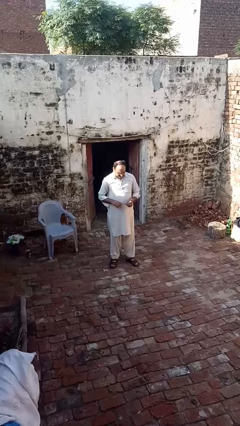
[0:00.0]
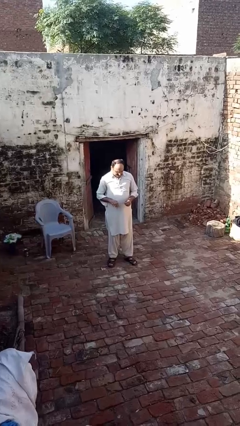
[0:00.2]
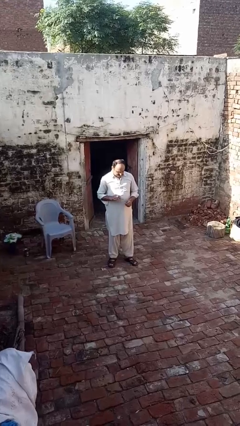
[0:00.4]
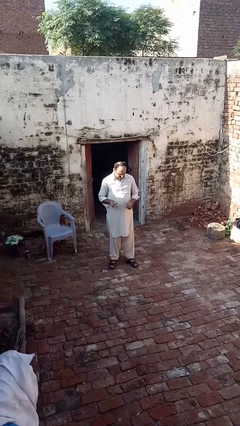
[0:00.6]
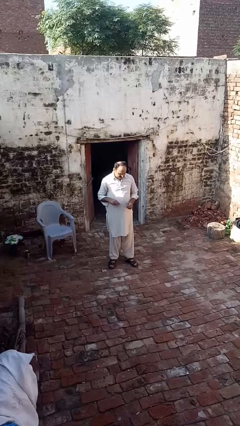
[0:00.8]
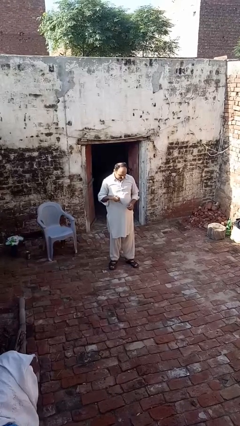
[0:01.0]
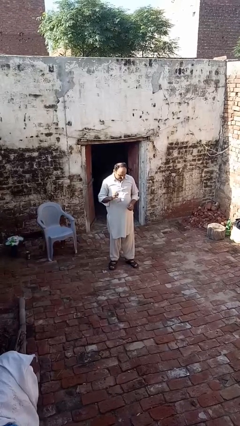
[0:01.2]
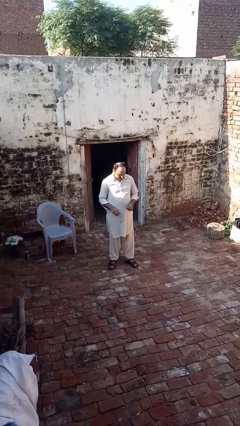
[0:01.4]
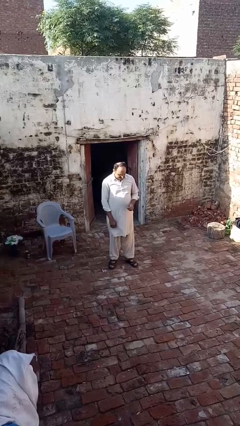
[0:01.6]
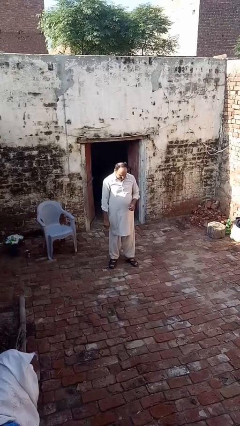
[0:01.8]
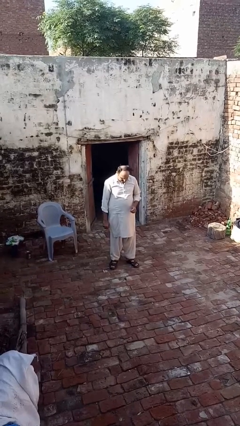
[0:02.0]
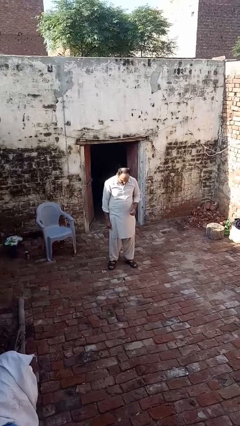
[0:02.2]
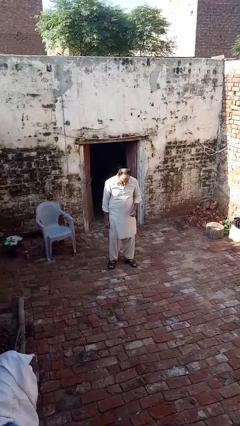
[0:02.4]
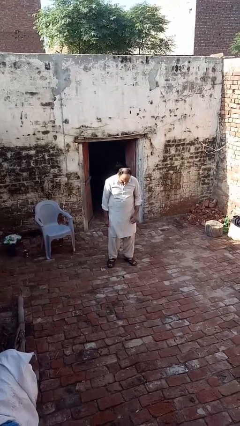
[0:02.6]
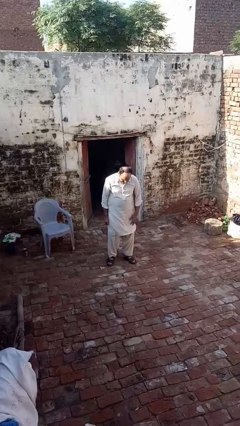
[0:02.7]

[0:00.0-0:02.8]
person drops object

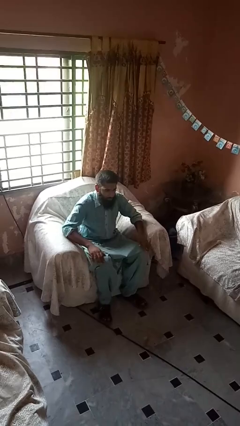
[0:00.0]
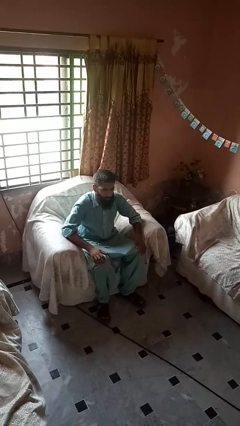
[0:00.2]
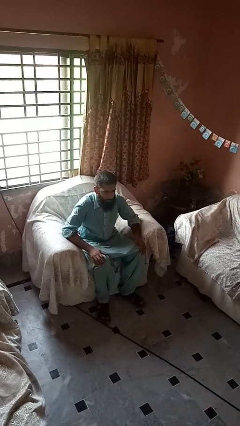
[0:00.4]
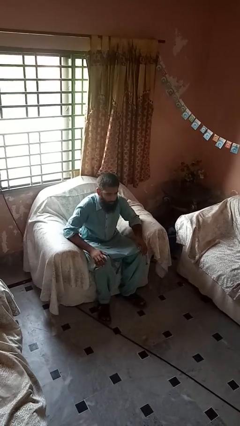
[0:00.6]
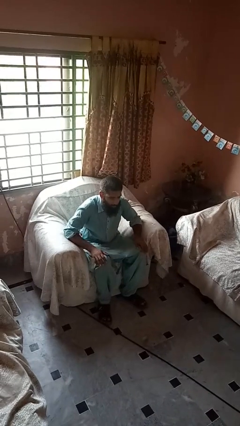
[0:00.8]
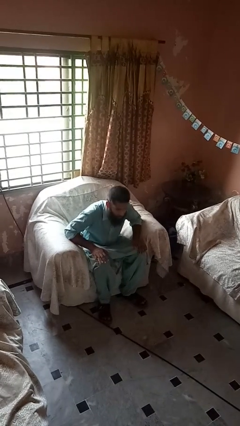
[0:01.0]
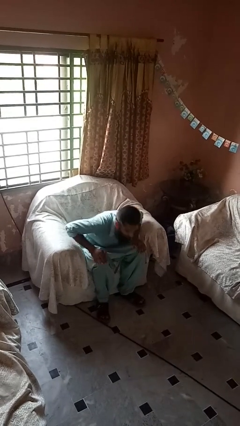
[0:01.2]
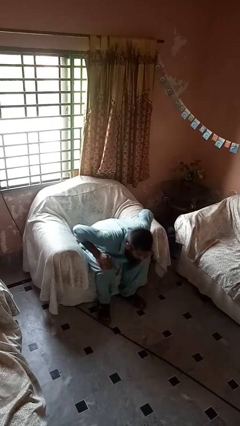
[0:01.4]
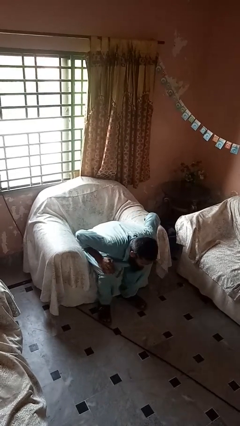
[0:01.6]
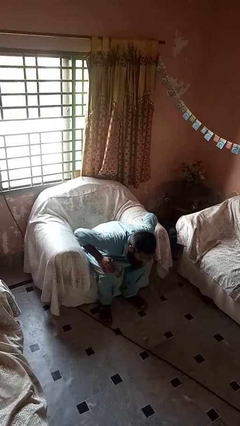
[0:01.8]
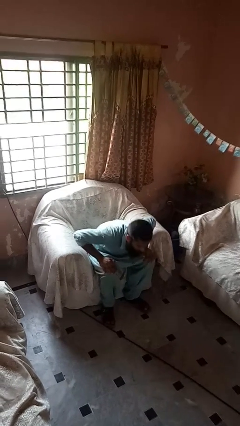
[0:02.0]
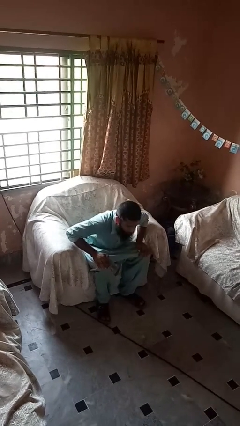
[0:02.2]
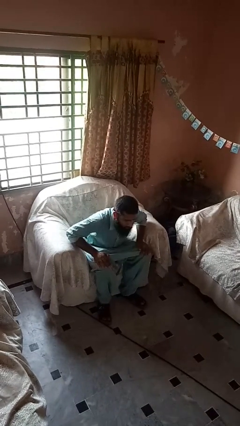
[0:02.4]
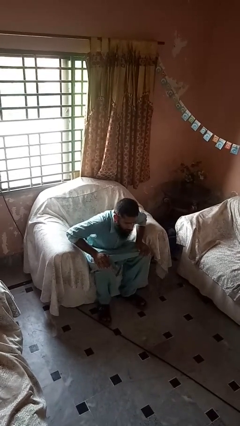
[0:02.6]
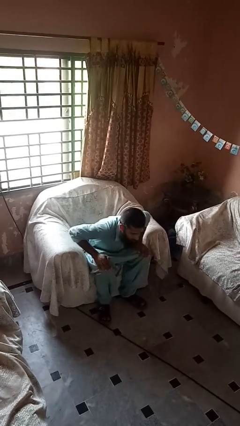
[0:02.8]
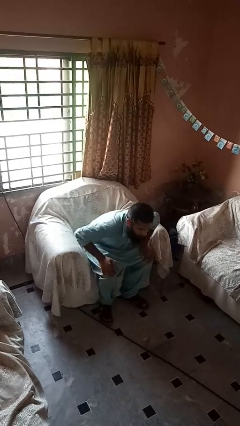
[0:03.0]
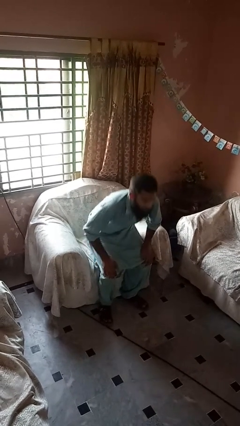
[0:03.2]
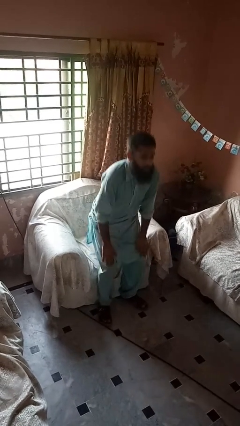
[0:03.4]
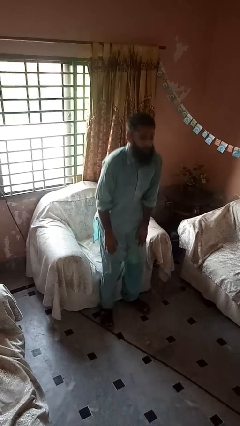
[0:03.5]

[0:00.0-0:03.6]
person falls from chair

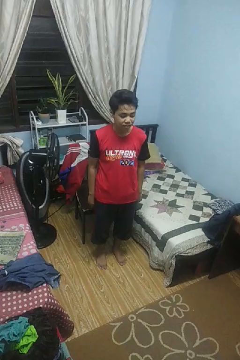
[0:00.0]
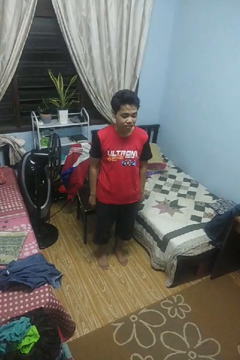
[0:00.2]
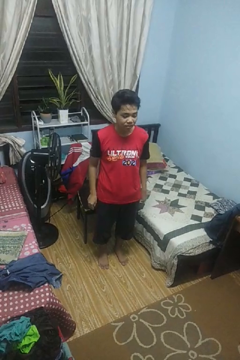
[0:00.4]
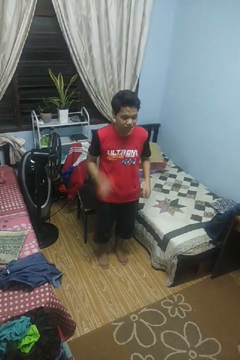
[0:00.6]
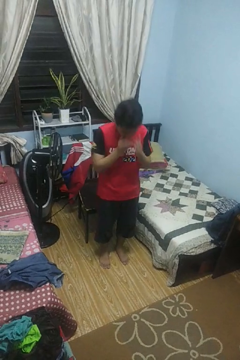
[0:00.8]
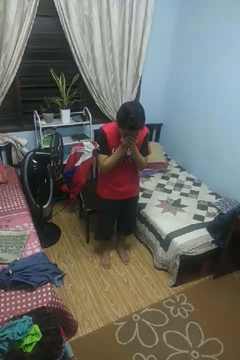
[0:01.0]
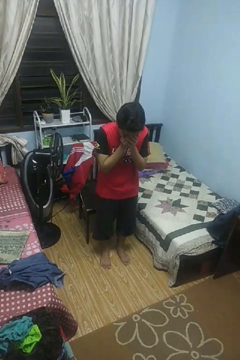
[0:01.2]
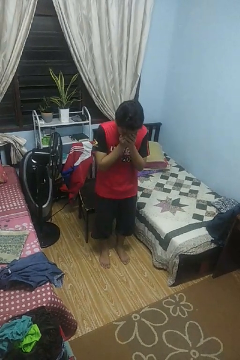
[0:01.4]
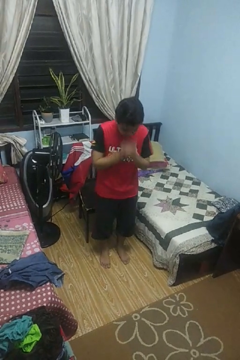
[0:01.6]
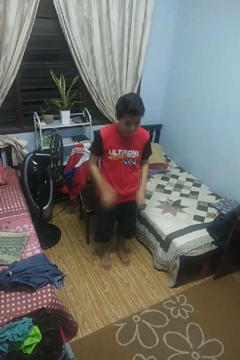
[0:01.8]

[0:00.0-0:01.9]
person sneezes into hand

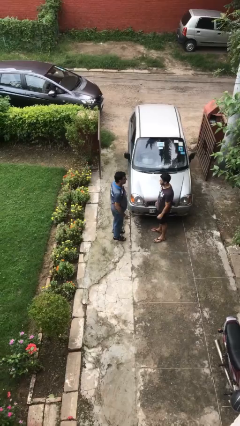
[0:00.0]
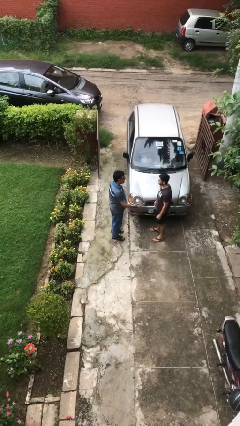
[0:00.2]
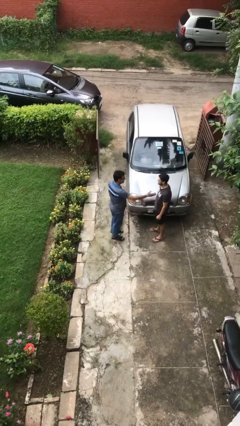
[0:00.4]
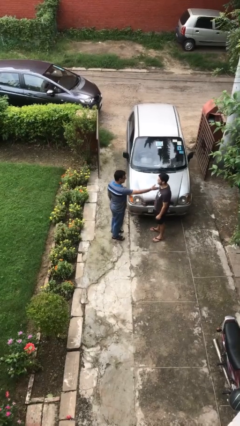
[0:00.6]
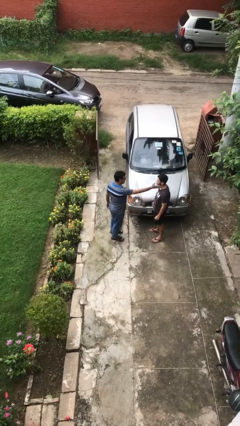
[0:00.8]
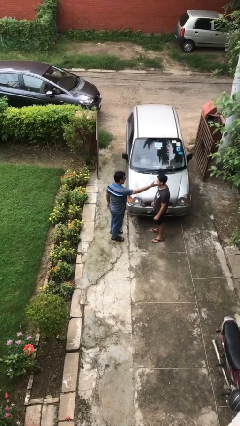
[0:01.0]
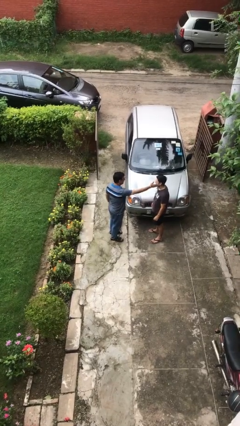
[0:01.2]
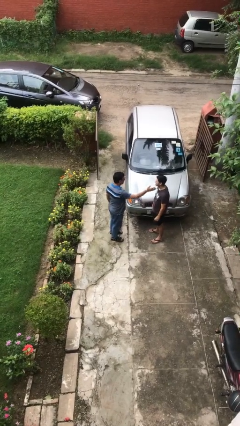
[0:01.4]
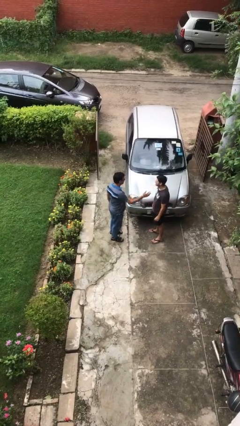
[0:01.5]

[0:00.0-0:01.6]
person touches face of person

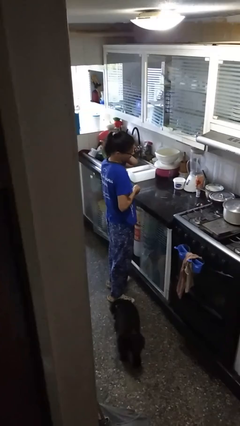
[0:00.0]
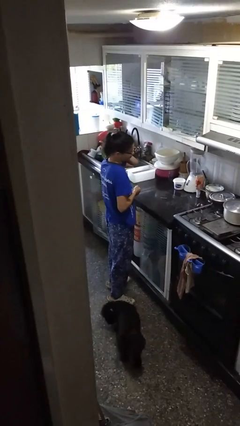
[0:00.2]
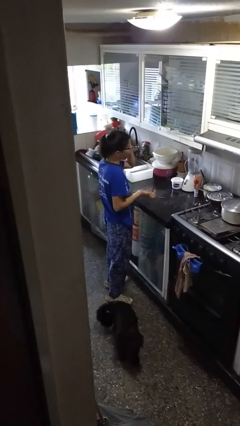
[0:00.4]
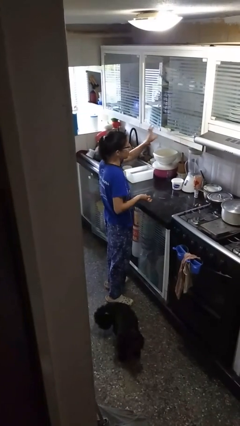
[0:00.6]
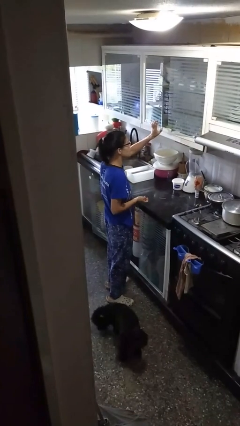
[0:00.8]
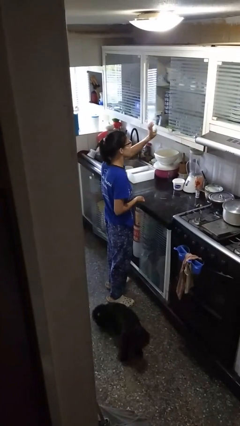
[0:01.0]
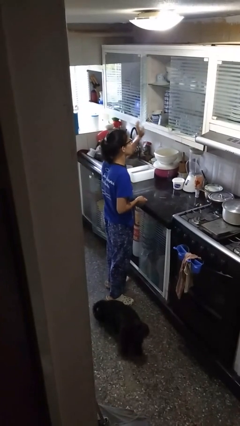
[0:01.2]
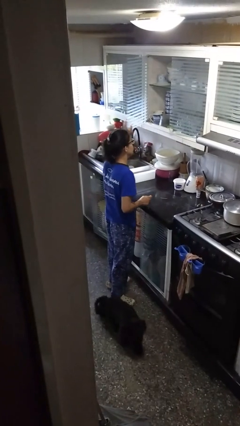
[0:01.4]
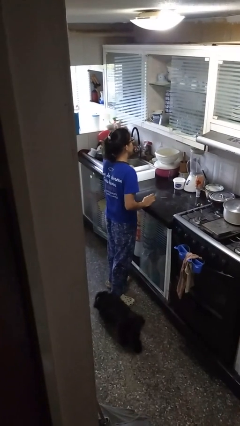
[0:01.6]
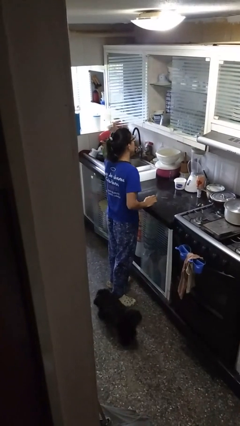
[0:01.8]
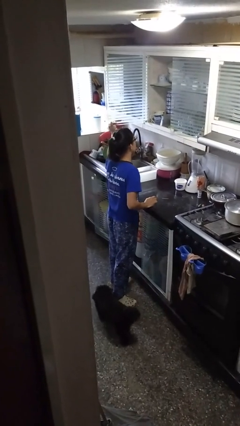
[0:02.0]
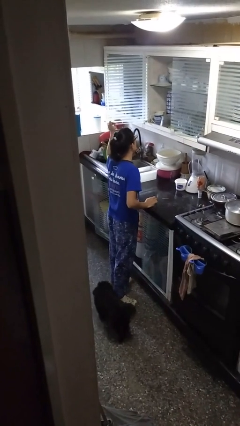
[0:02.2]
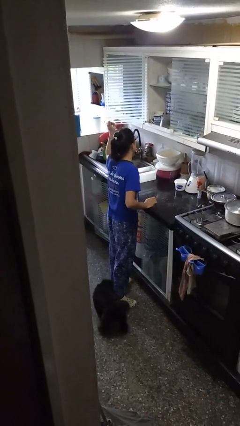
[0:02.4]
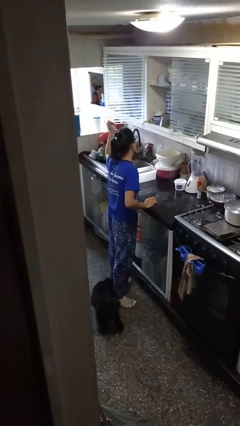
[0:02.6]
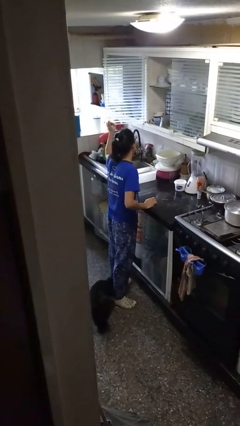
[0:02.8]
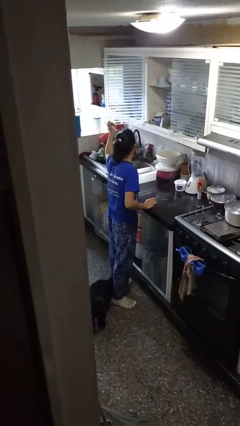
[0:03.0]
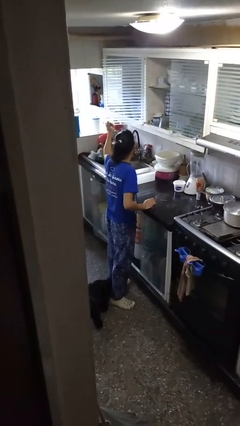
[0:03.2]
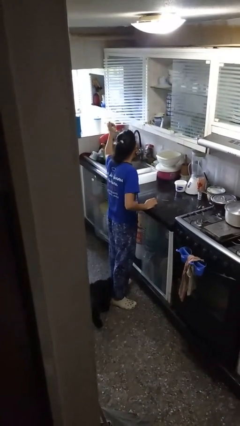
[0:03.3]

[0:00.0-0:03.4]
person opens cabinet

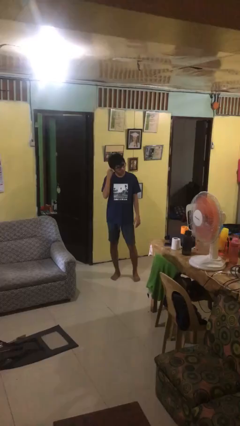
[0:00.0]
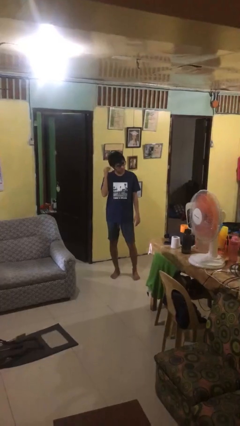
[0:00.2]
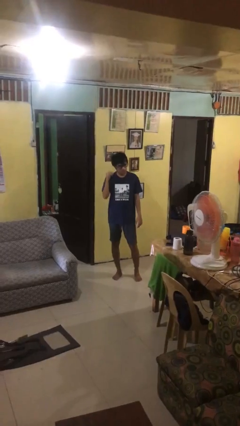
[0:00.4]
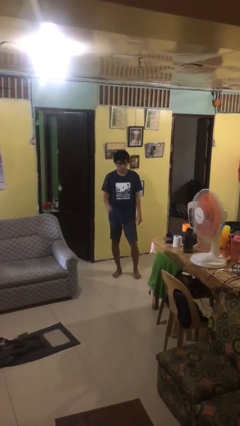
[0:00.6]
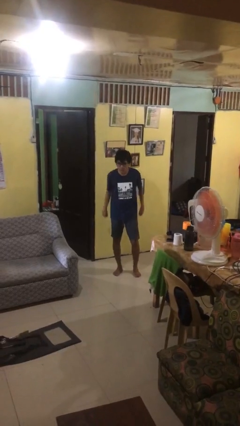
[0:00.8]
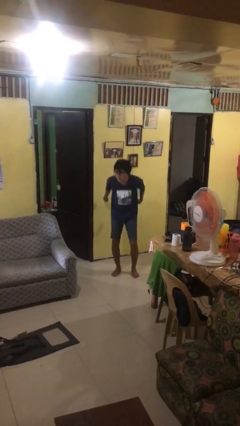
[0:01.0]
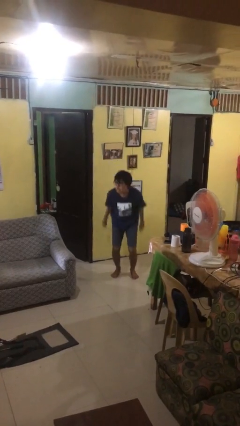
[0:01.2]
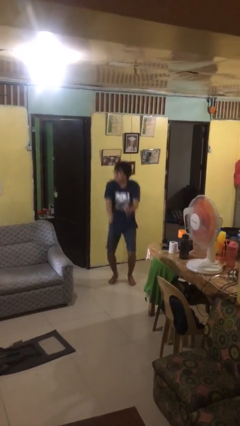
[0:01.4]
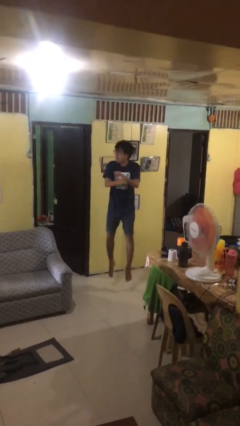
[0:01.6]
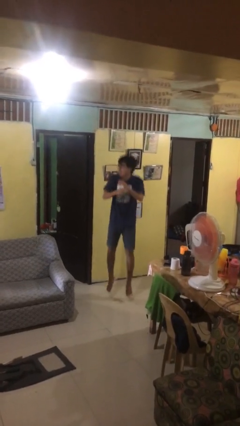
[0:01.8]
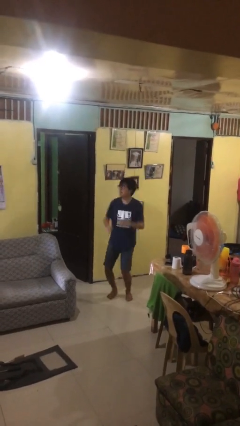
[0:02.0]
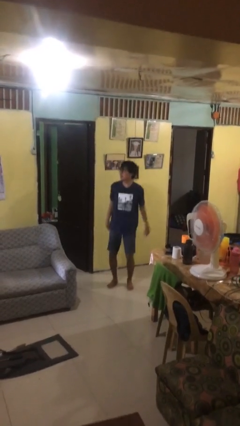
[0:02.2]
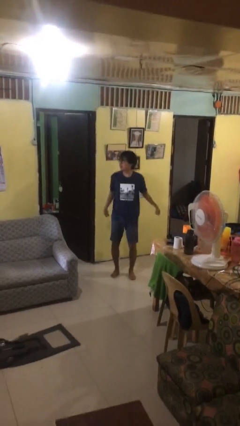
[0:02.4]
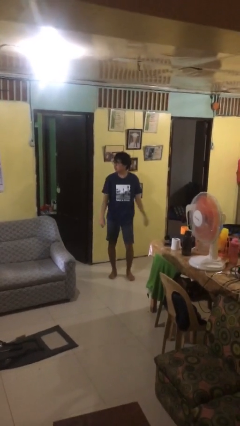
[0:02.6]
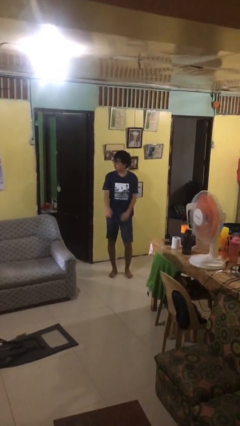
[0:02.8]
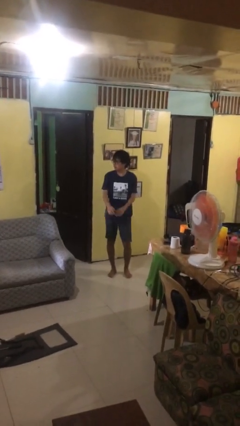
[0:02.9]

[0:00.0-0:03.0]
person jumps

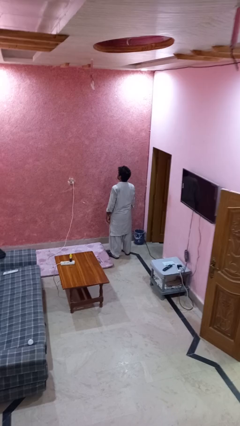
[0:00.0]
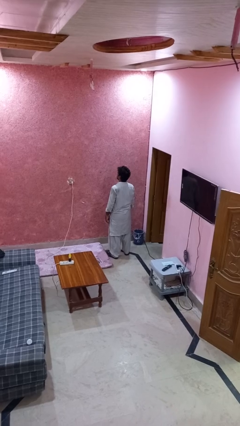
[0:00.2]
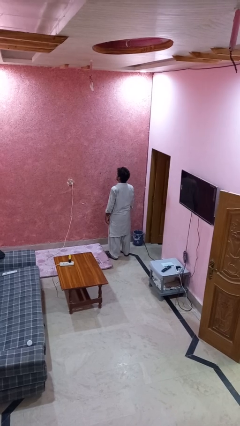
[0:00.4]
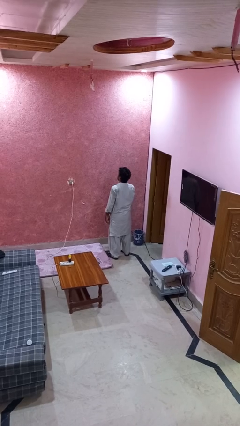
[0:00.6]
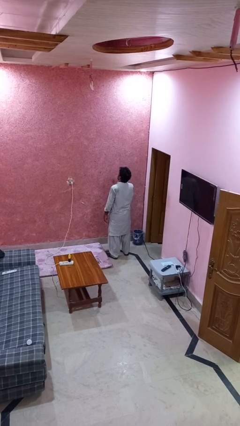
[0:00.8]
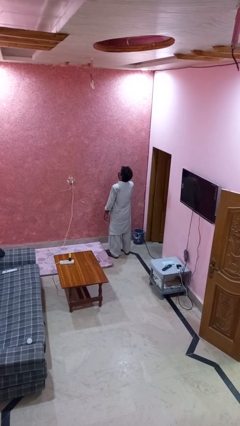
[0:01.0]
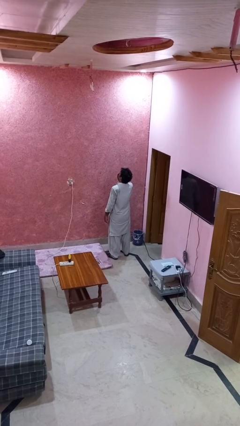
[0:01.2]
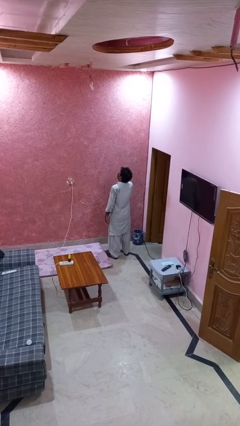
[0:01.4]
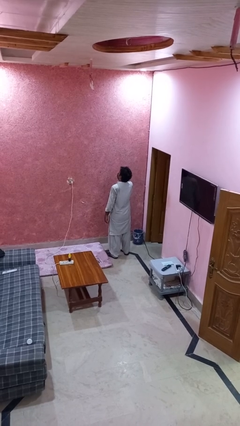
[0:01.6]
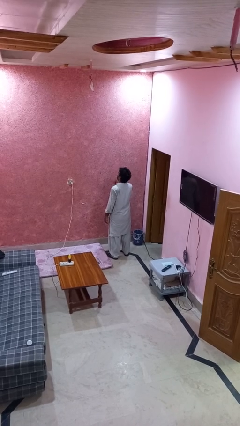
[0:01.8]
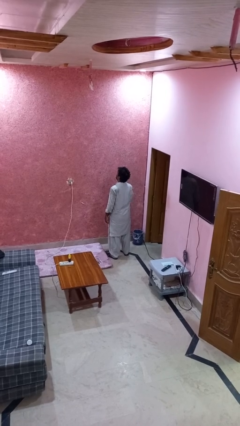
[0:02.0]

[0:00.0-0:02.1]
person yawns
